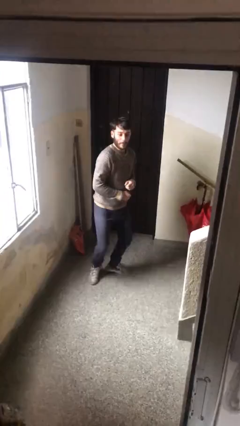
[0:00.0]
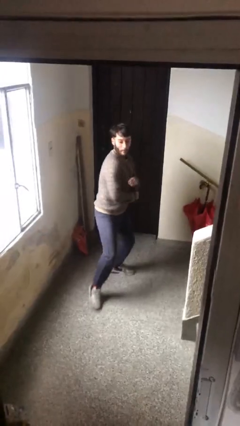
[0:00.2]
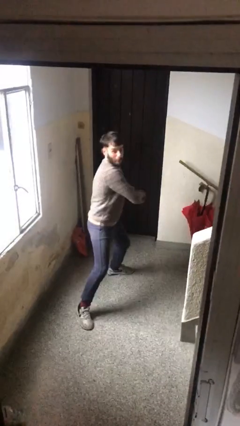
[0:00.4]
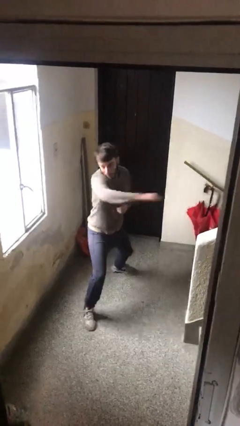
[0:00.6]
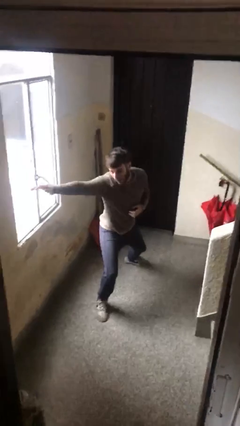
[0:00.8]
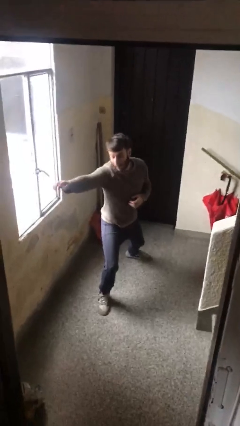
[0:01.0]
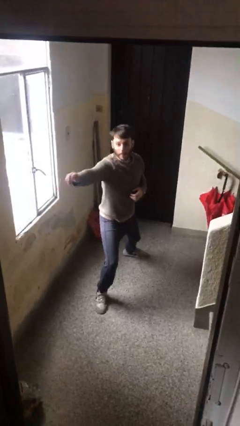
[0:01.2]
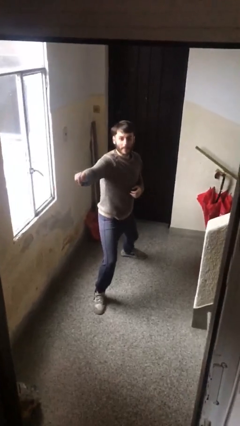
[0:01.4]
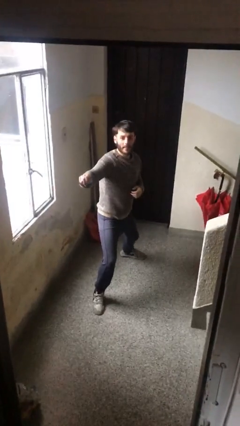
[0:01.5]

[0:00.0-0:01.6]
person karate chop

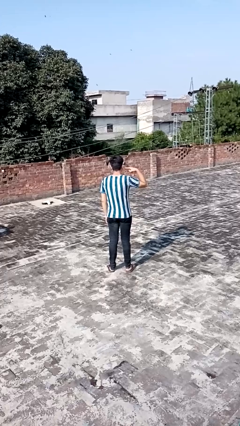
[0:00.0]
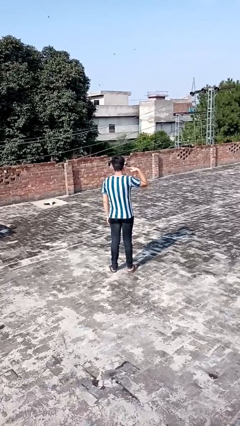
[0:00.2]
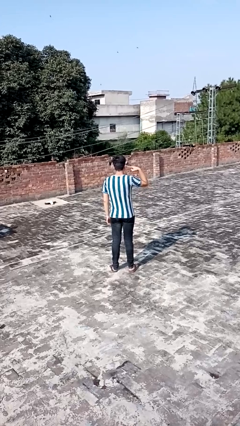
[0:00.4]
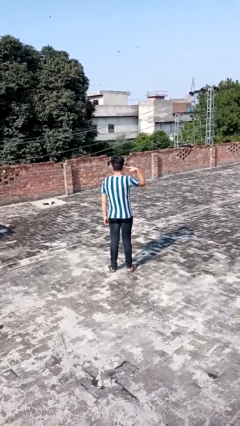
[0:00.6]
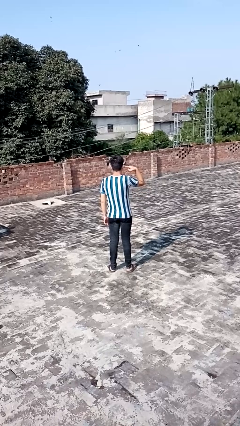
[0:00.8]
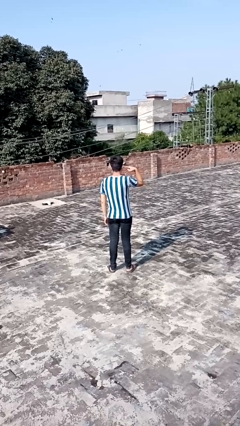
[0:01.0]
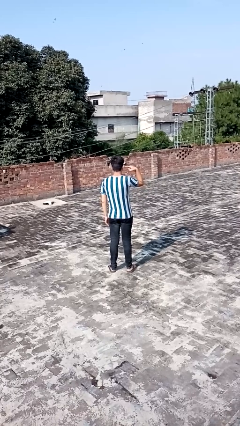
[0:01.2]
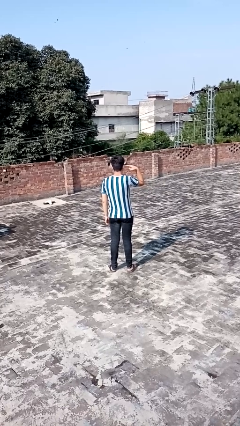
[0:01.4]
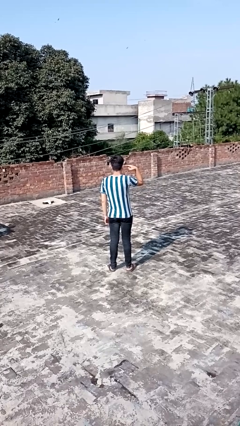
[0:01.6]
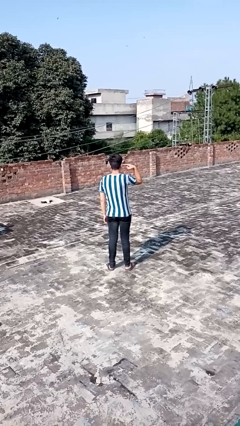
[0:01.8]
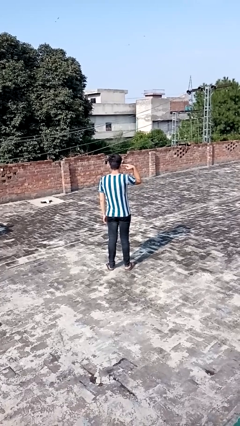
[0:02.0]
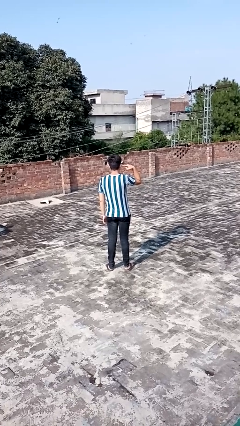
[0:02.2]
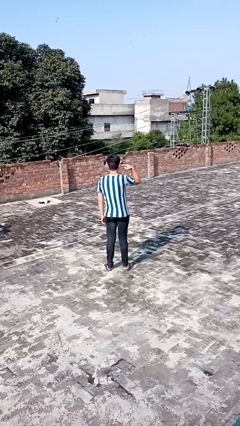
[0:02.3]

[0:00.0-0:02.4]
person gestures listen closely

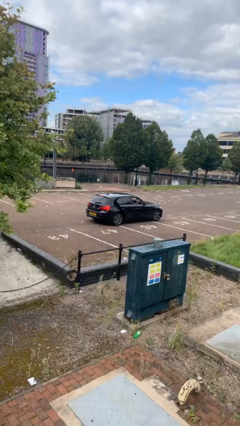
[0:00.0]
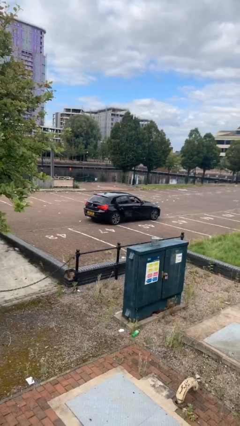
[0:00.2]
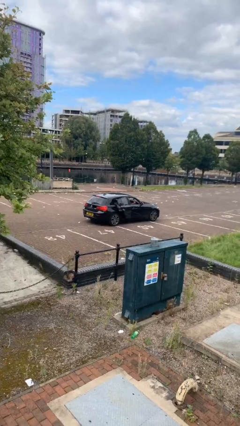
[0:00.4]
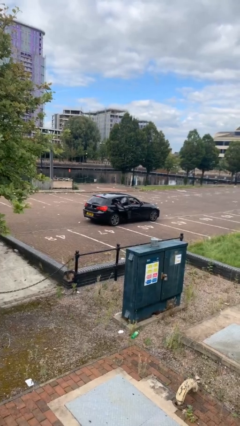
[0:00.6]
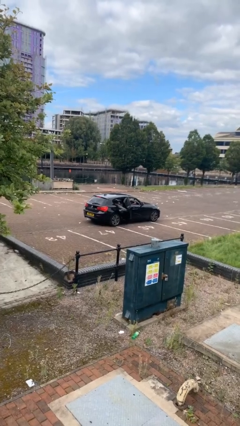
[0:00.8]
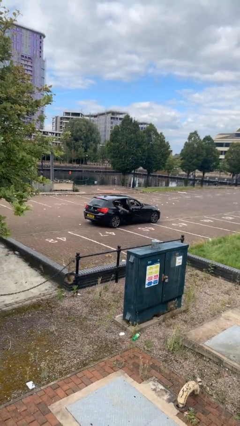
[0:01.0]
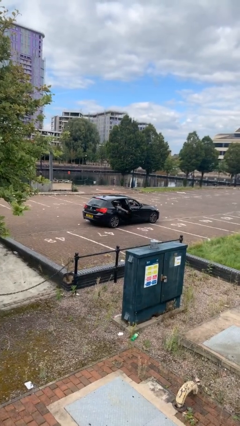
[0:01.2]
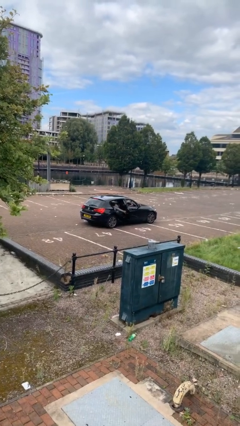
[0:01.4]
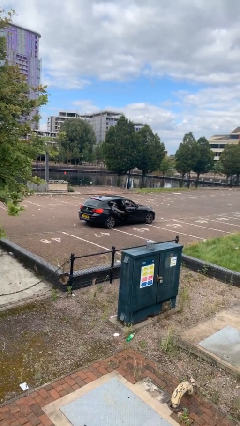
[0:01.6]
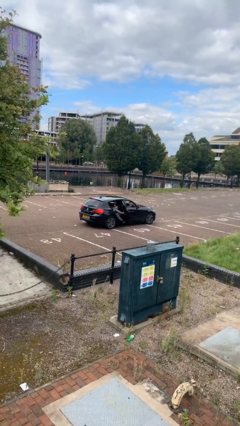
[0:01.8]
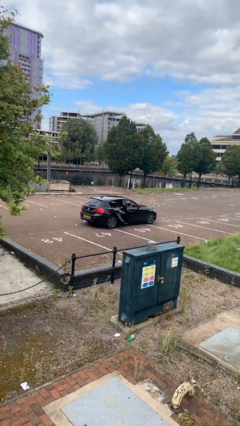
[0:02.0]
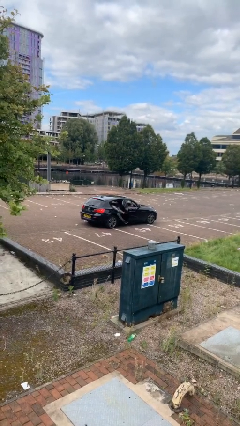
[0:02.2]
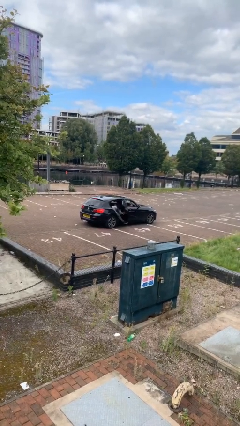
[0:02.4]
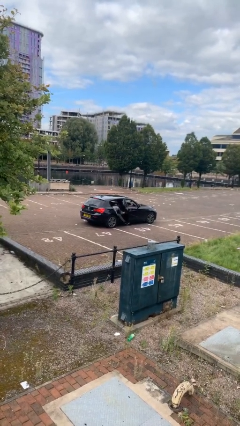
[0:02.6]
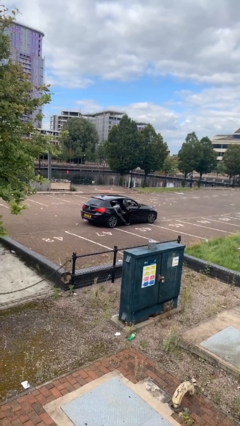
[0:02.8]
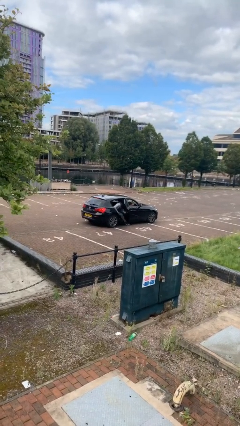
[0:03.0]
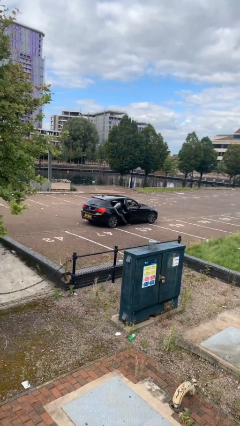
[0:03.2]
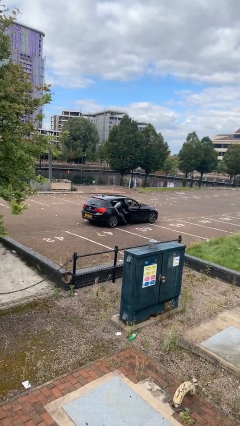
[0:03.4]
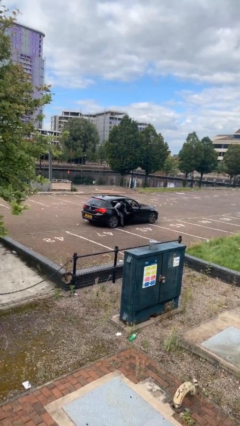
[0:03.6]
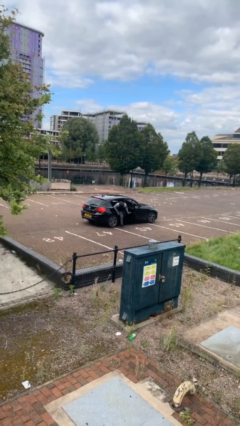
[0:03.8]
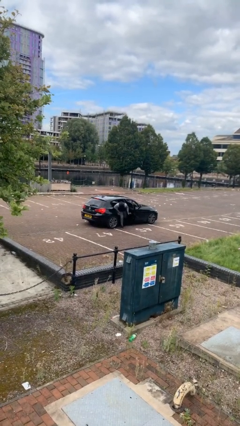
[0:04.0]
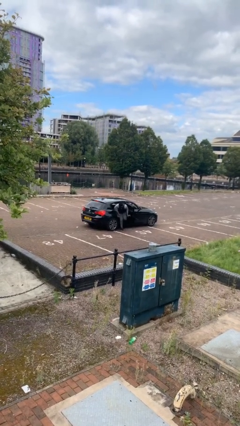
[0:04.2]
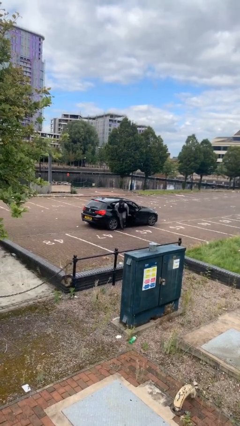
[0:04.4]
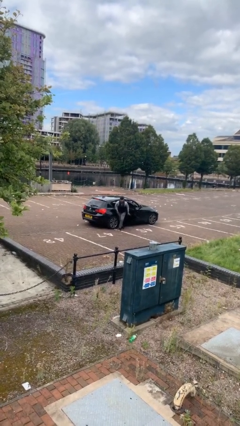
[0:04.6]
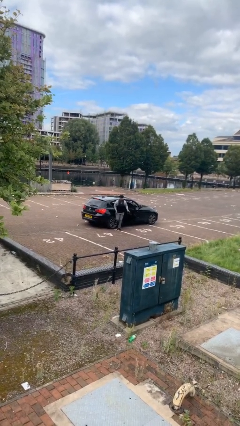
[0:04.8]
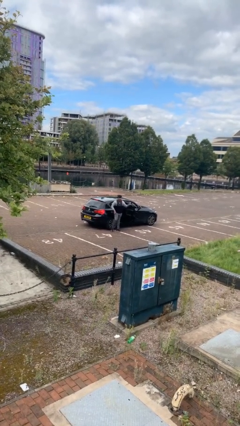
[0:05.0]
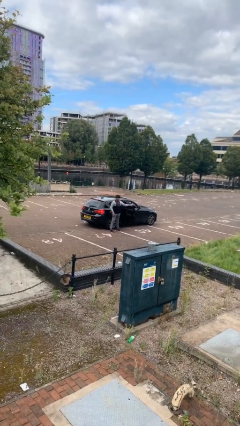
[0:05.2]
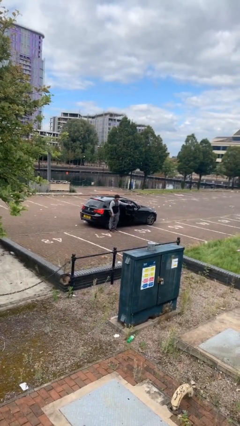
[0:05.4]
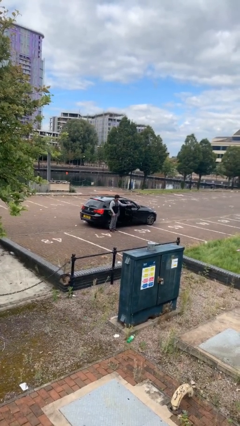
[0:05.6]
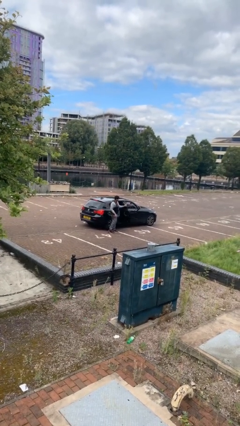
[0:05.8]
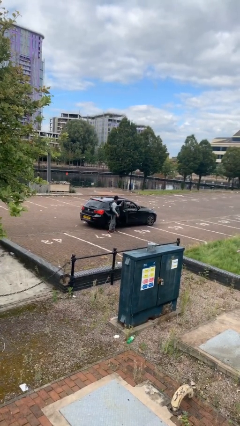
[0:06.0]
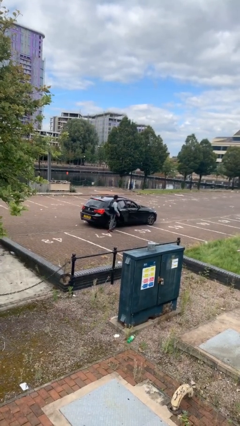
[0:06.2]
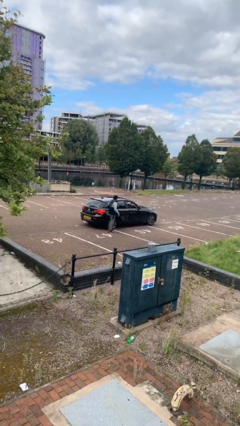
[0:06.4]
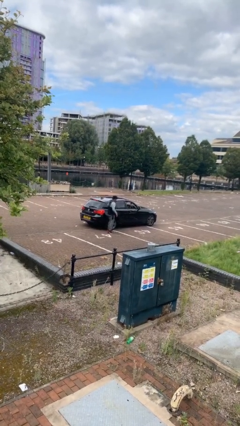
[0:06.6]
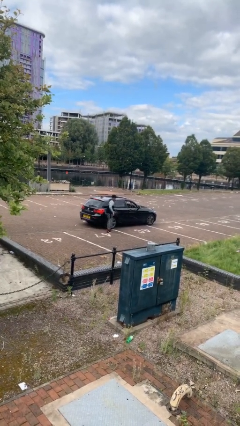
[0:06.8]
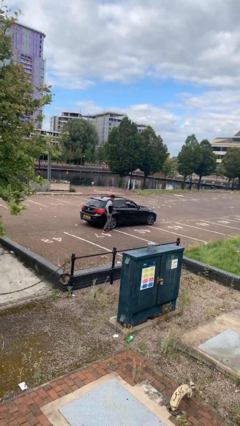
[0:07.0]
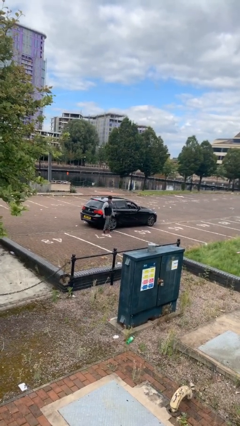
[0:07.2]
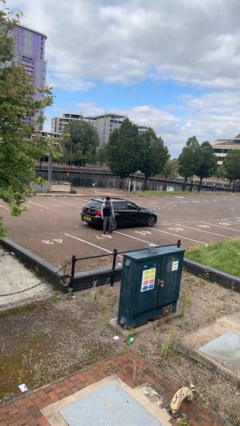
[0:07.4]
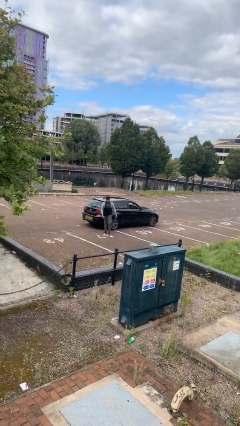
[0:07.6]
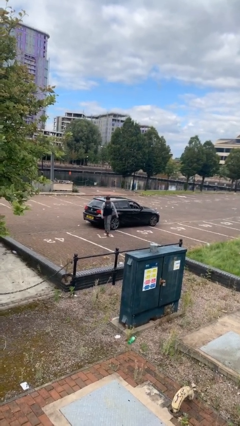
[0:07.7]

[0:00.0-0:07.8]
car drops off person

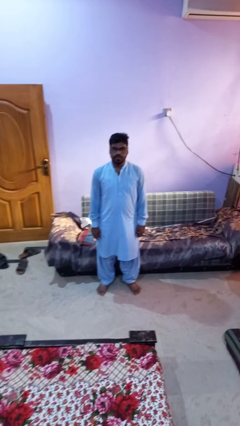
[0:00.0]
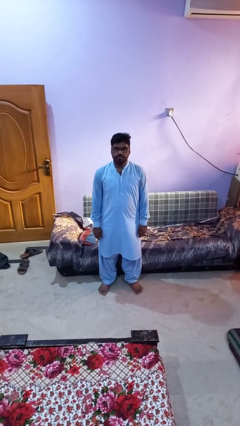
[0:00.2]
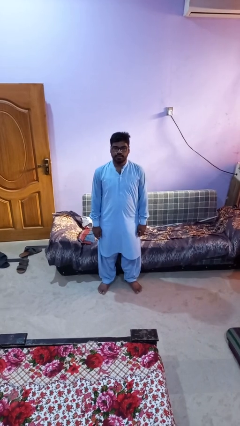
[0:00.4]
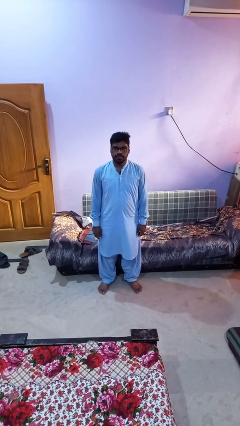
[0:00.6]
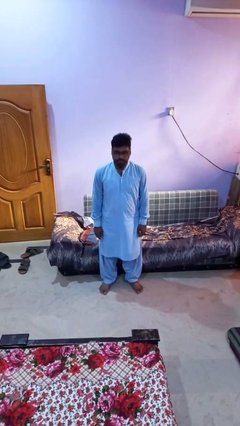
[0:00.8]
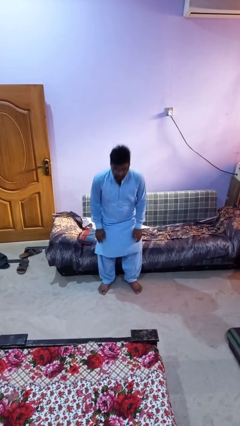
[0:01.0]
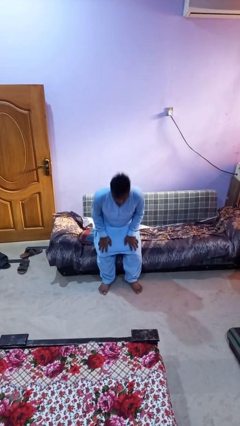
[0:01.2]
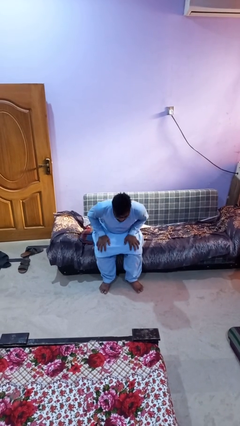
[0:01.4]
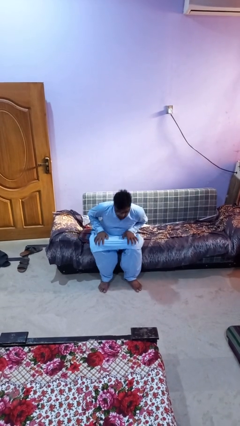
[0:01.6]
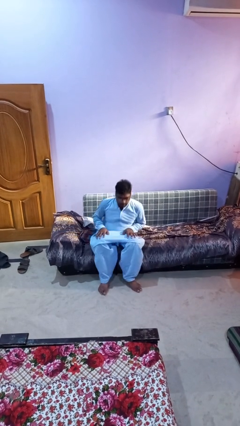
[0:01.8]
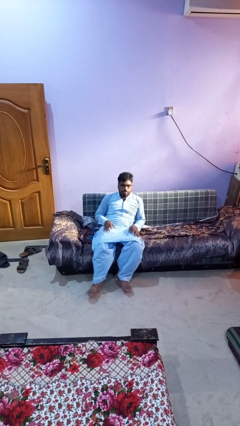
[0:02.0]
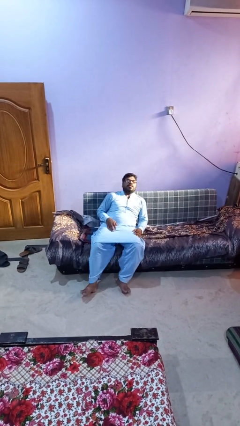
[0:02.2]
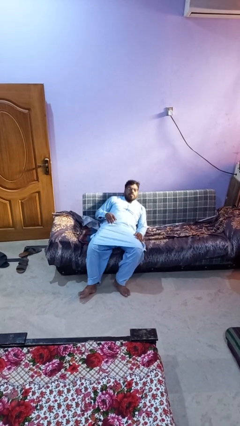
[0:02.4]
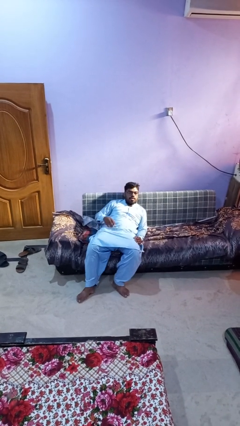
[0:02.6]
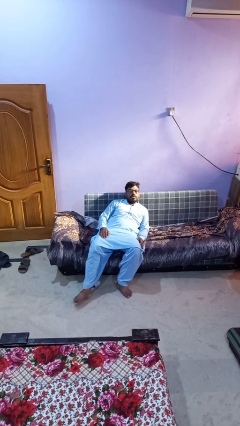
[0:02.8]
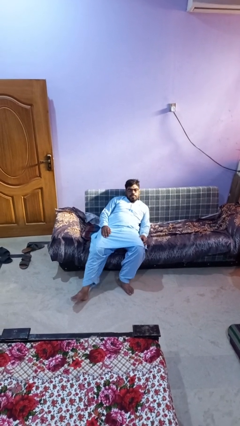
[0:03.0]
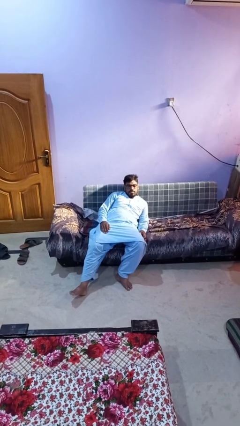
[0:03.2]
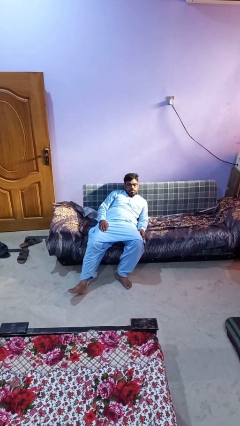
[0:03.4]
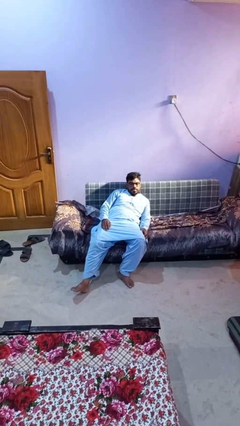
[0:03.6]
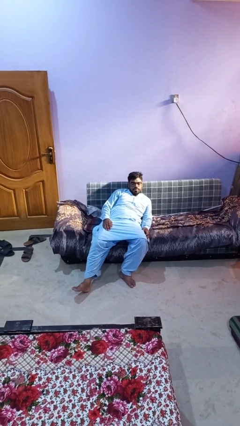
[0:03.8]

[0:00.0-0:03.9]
person lies down on couch

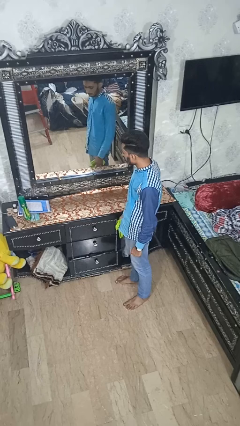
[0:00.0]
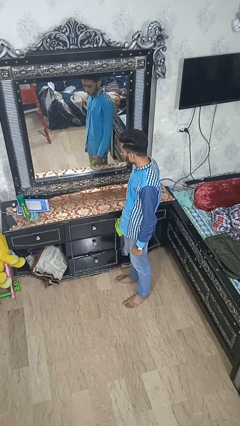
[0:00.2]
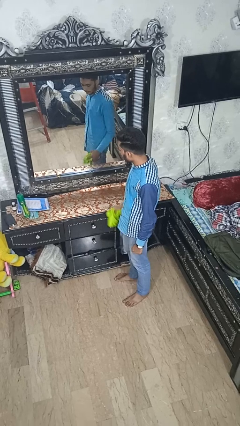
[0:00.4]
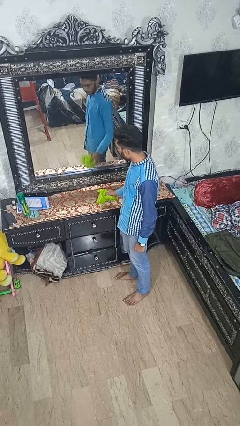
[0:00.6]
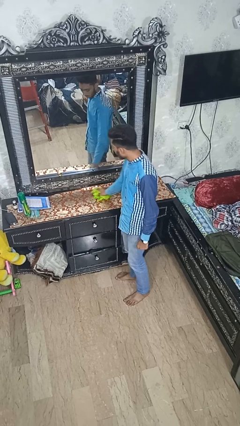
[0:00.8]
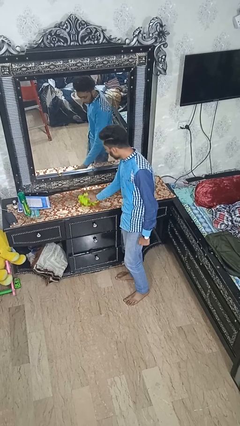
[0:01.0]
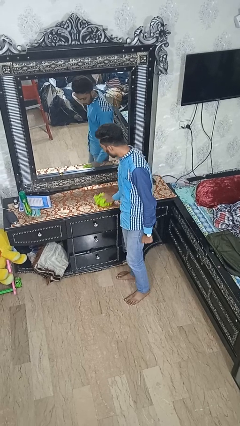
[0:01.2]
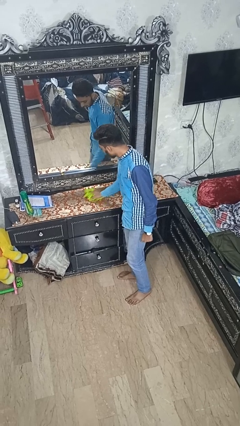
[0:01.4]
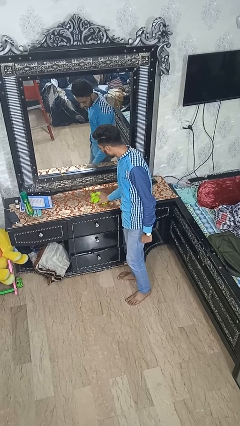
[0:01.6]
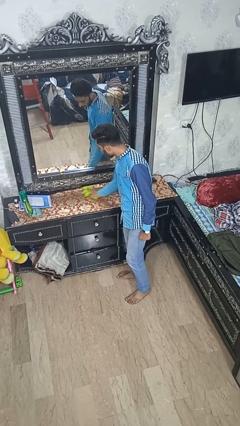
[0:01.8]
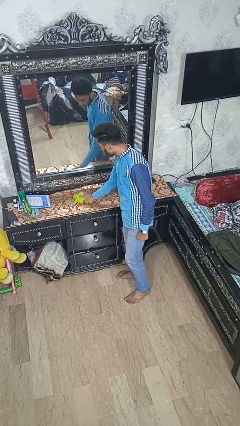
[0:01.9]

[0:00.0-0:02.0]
person cleans table with rag
